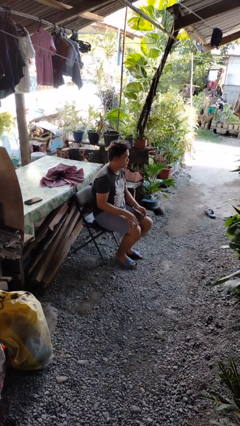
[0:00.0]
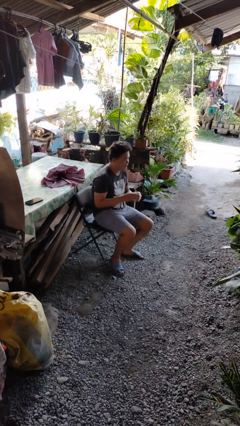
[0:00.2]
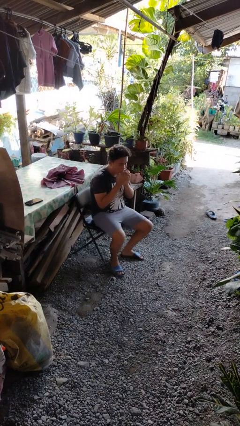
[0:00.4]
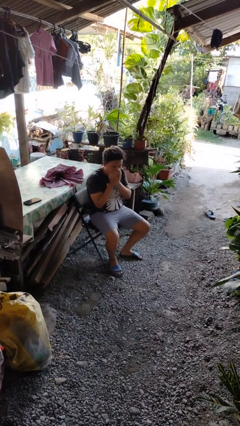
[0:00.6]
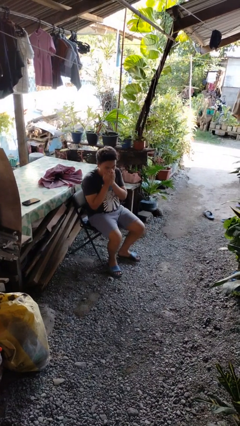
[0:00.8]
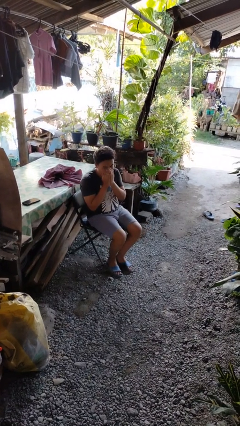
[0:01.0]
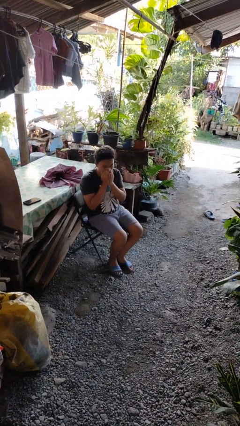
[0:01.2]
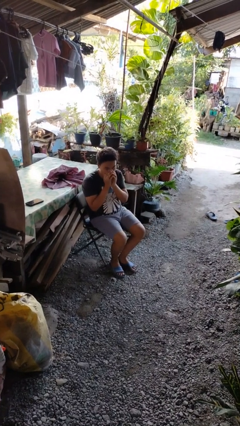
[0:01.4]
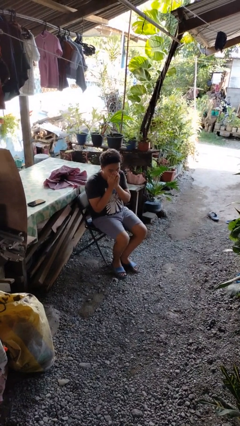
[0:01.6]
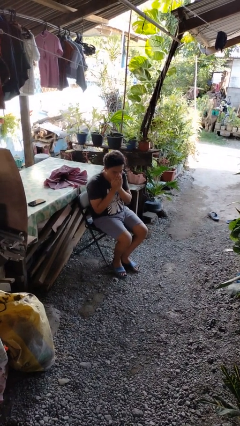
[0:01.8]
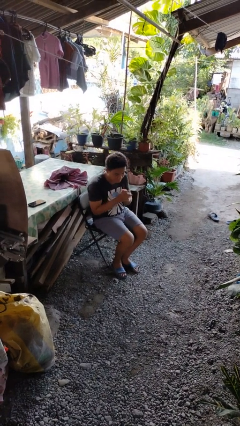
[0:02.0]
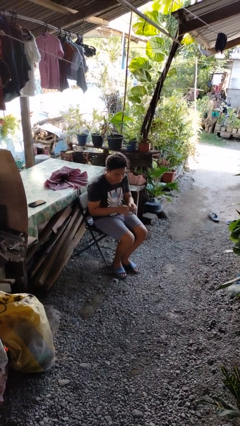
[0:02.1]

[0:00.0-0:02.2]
person blows into hands

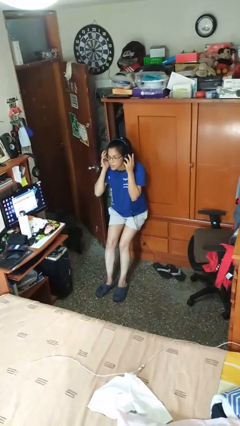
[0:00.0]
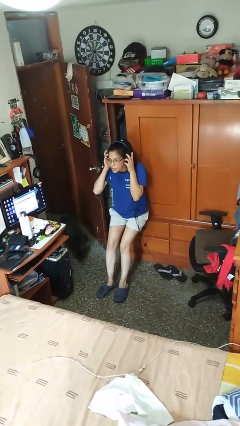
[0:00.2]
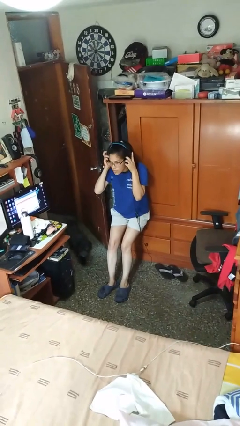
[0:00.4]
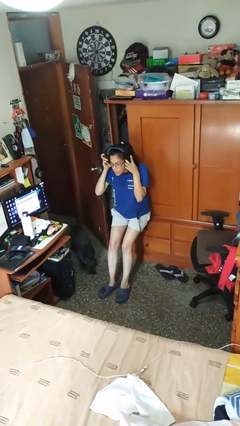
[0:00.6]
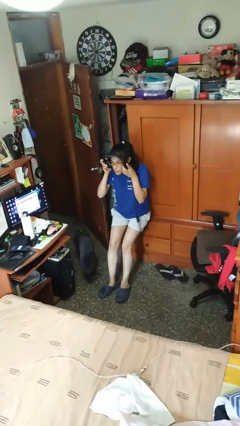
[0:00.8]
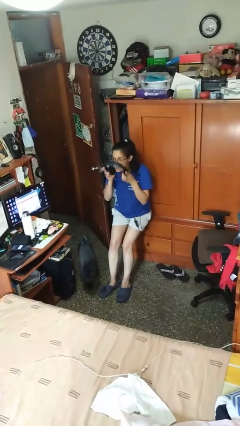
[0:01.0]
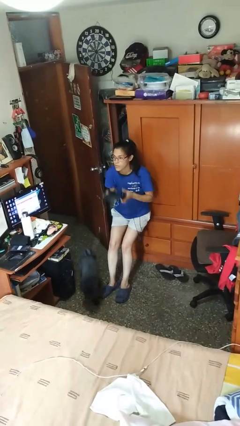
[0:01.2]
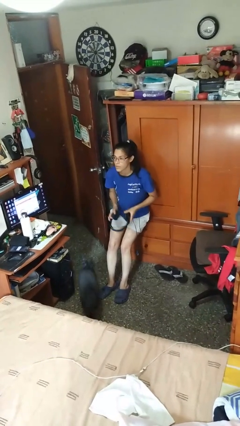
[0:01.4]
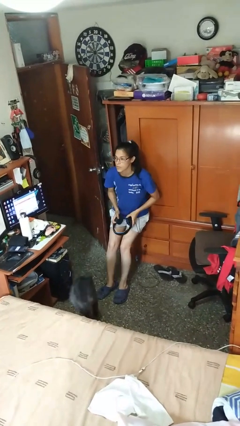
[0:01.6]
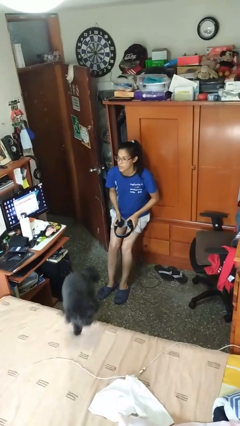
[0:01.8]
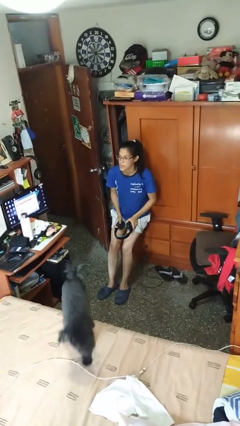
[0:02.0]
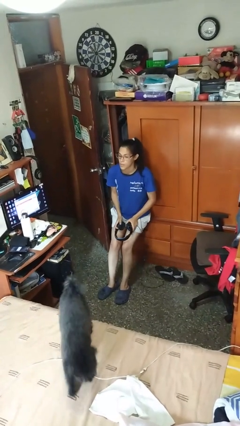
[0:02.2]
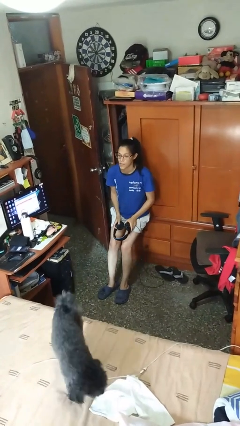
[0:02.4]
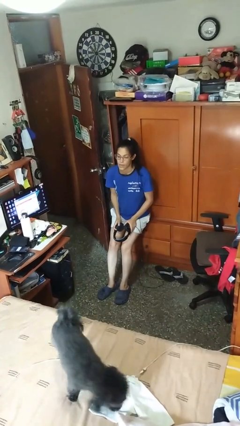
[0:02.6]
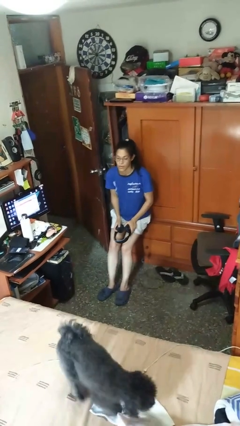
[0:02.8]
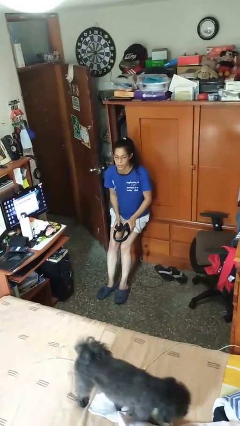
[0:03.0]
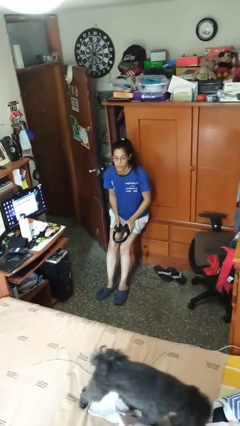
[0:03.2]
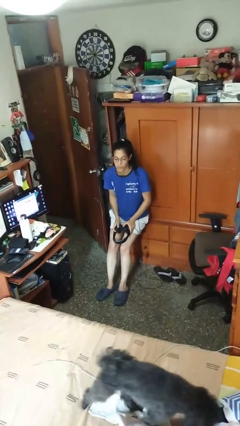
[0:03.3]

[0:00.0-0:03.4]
person takes off headphones

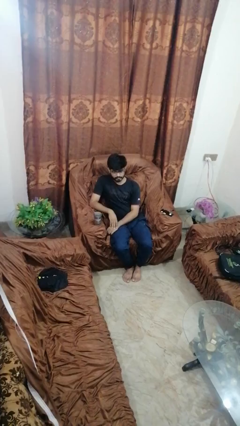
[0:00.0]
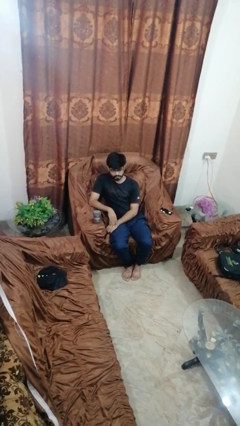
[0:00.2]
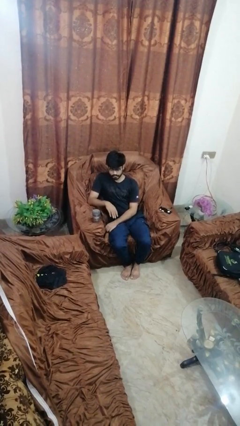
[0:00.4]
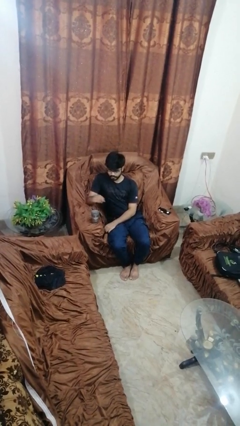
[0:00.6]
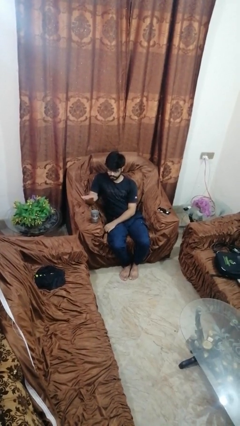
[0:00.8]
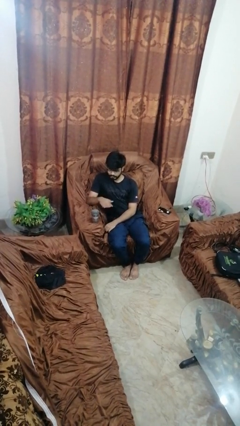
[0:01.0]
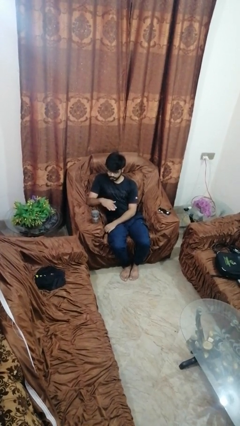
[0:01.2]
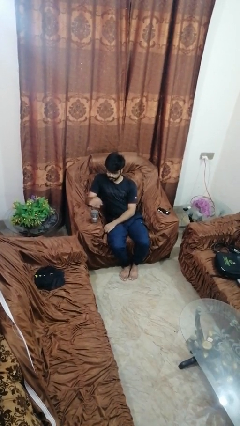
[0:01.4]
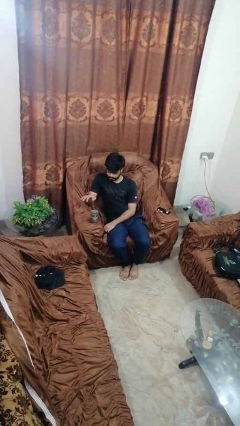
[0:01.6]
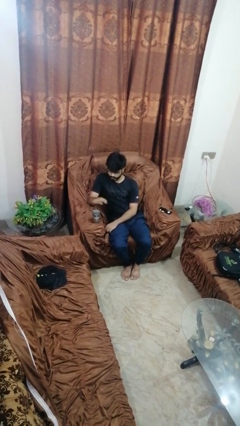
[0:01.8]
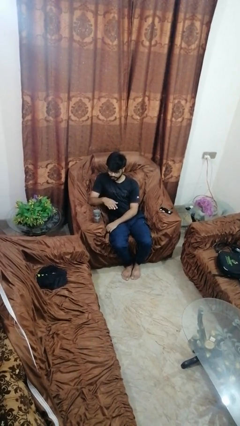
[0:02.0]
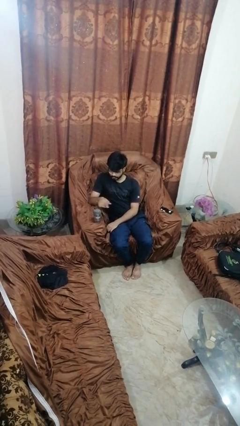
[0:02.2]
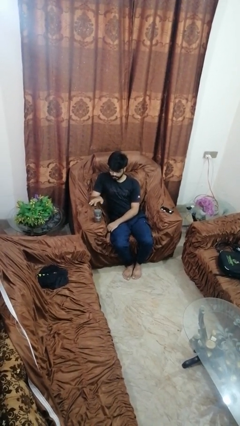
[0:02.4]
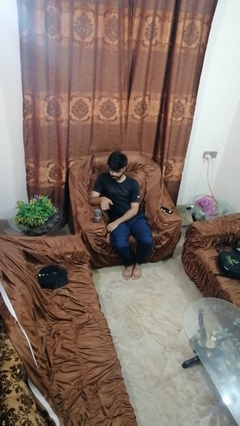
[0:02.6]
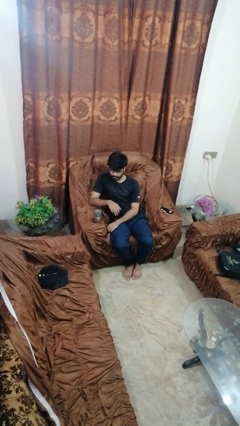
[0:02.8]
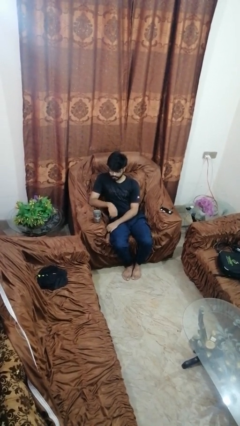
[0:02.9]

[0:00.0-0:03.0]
person waves hand over object

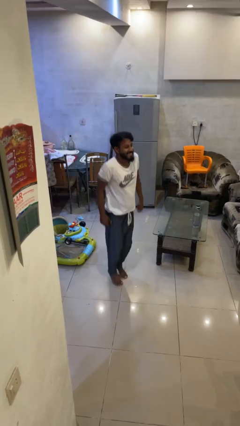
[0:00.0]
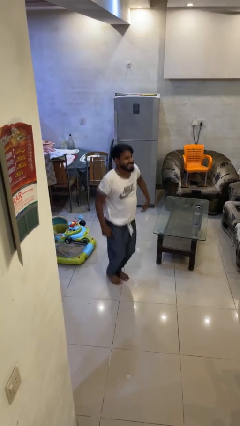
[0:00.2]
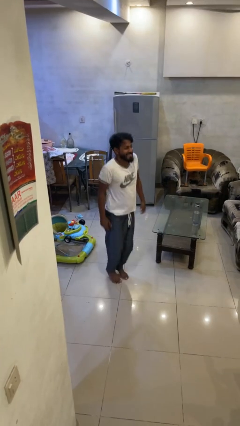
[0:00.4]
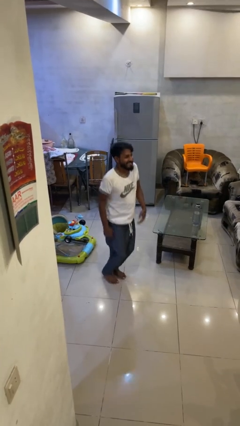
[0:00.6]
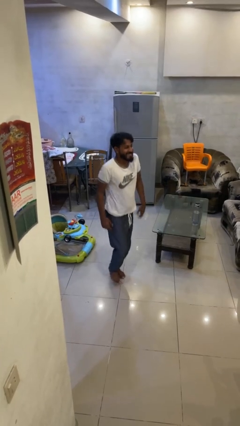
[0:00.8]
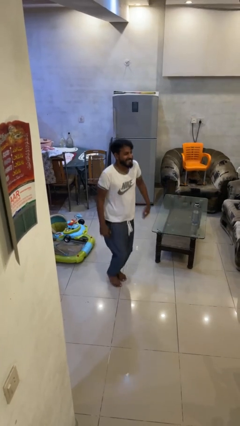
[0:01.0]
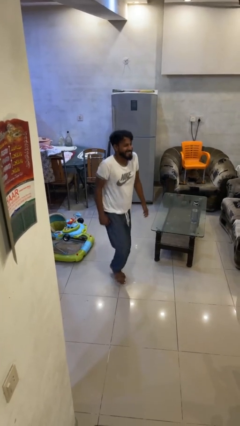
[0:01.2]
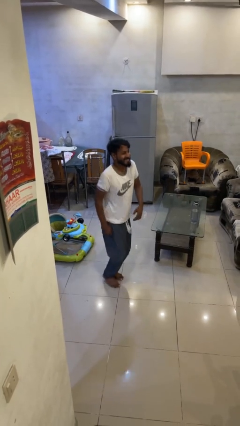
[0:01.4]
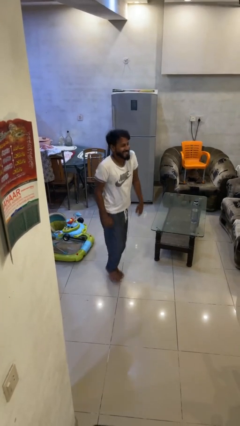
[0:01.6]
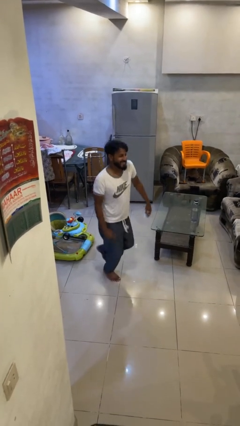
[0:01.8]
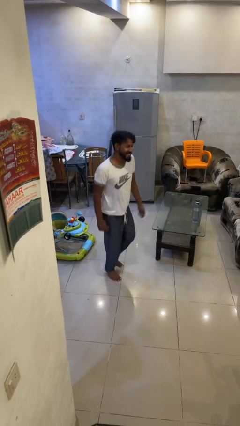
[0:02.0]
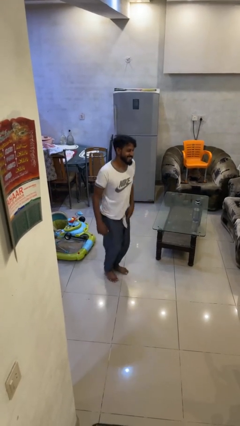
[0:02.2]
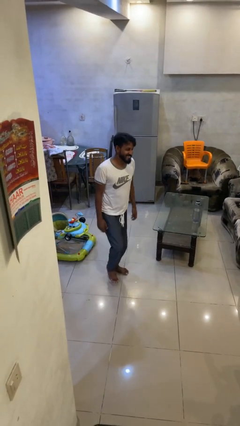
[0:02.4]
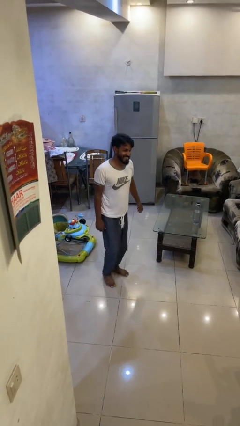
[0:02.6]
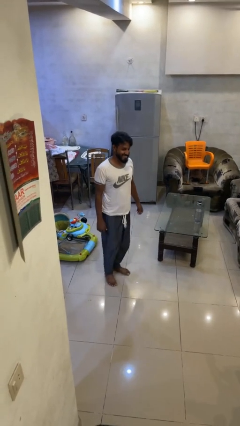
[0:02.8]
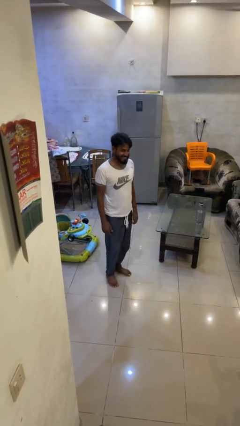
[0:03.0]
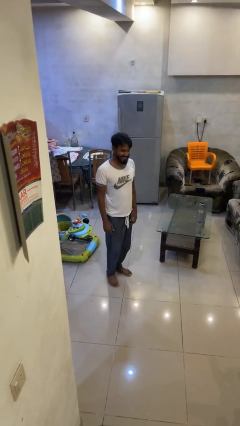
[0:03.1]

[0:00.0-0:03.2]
person jumps

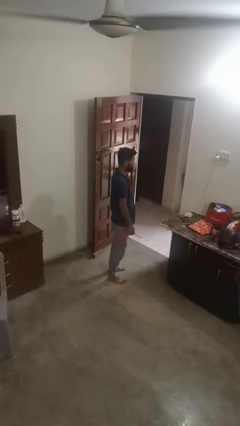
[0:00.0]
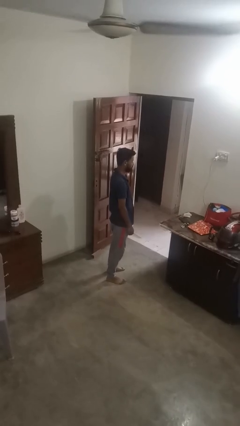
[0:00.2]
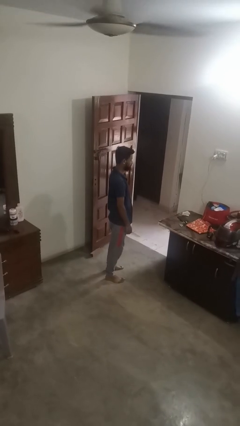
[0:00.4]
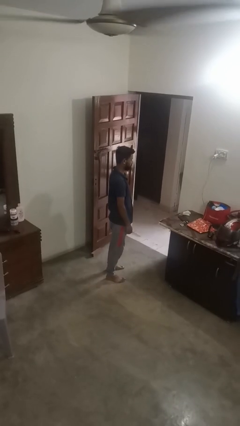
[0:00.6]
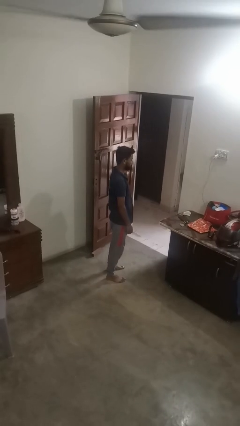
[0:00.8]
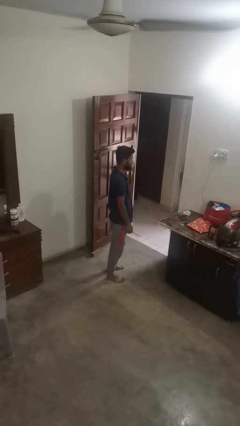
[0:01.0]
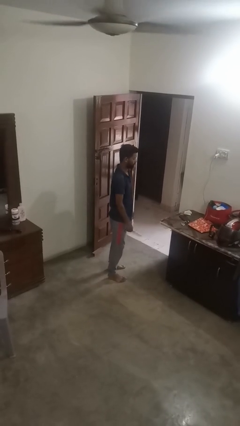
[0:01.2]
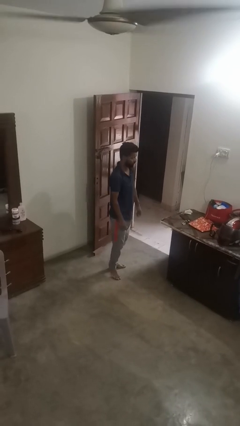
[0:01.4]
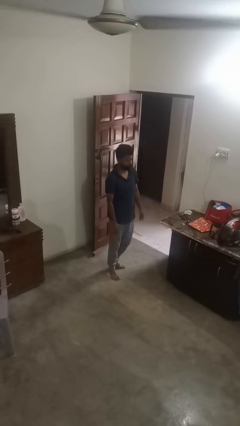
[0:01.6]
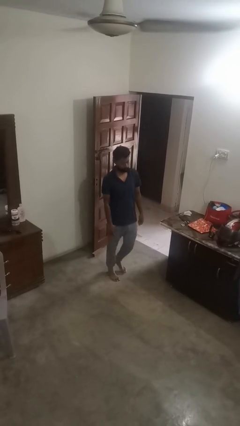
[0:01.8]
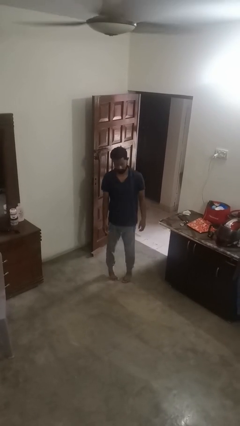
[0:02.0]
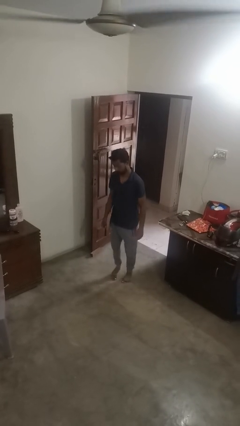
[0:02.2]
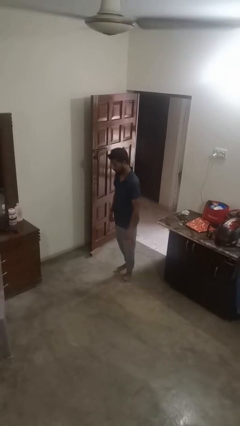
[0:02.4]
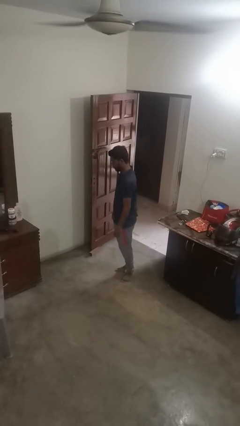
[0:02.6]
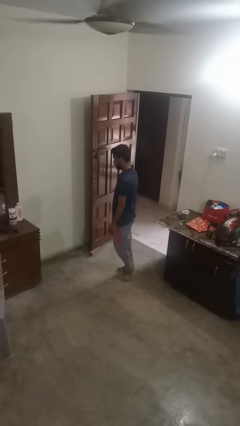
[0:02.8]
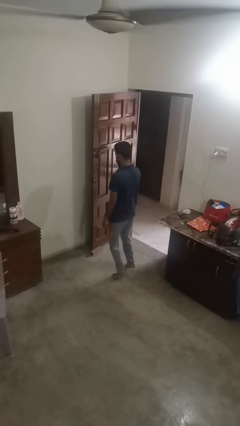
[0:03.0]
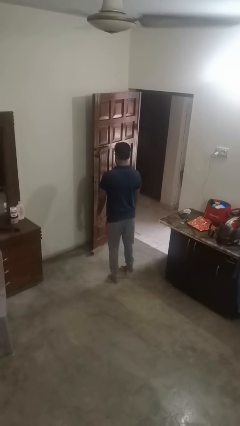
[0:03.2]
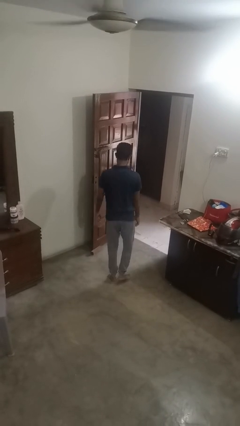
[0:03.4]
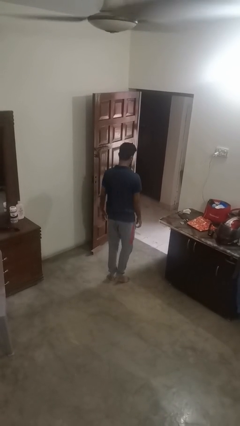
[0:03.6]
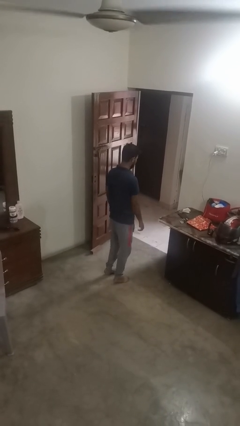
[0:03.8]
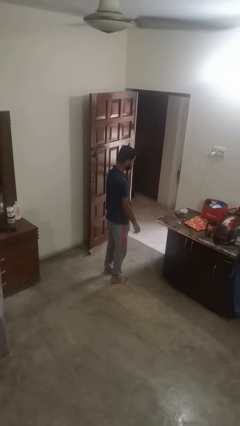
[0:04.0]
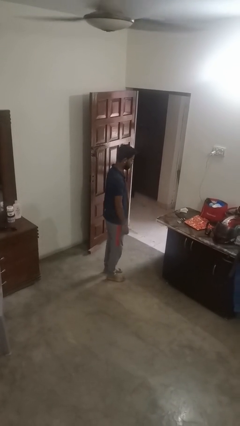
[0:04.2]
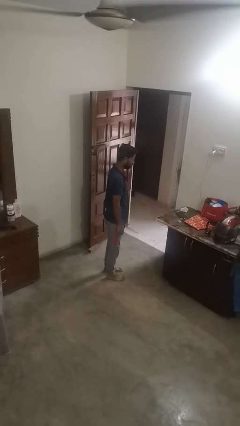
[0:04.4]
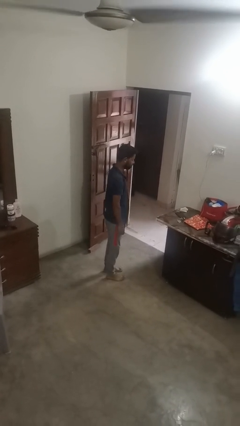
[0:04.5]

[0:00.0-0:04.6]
person twirls

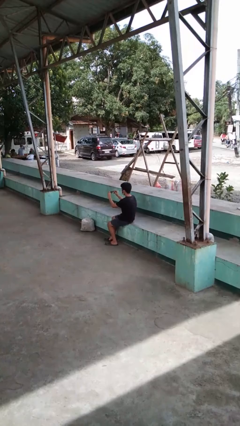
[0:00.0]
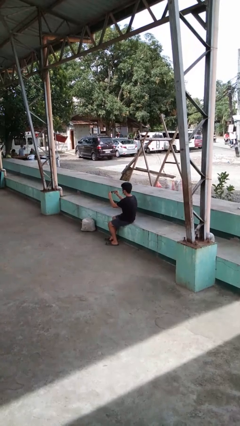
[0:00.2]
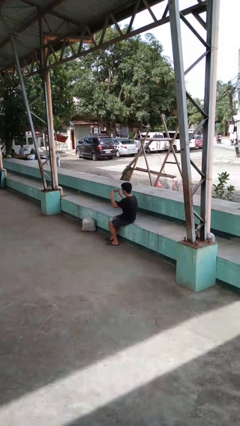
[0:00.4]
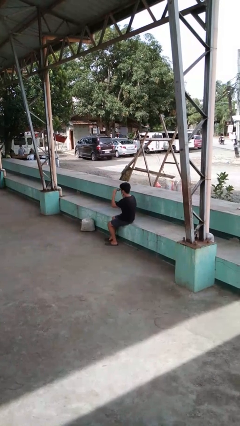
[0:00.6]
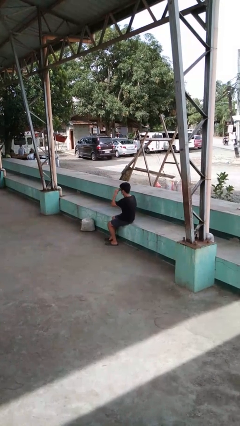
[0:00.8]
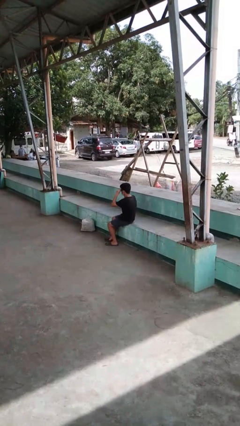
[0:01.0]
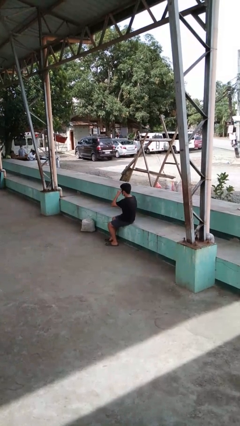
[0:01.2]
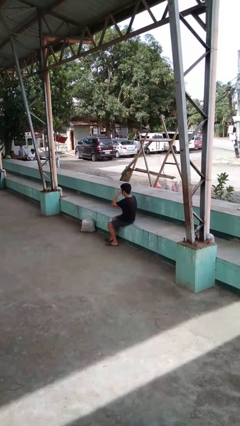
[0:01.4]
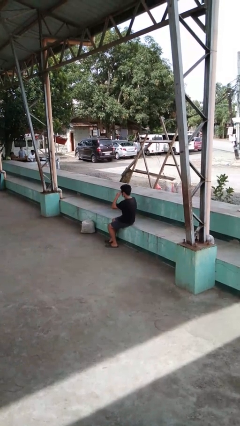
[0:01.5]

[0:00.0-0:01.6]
person brushes hair
